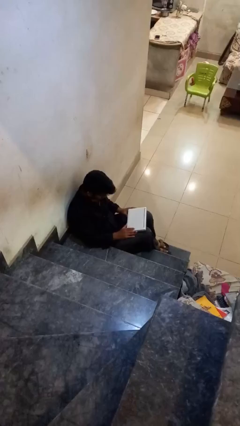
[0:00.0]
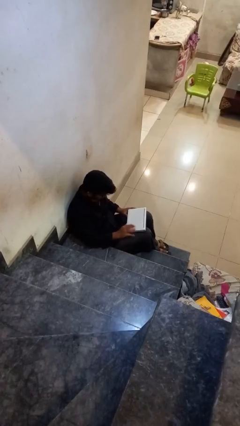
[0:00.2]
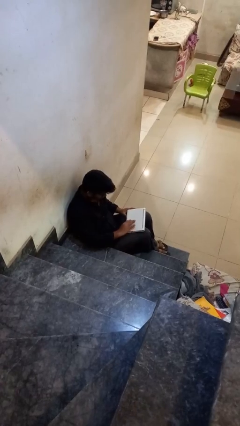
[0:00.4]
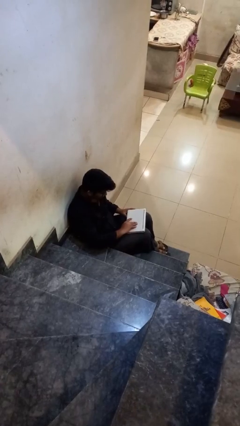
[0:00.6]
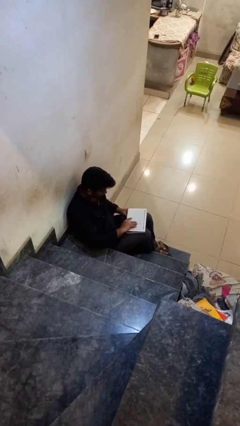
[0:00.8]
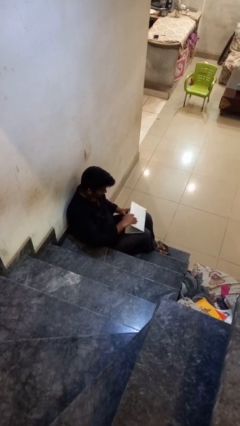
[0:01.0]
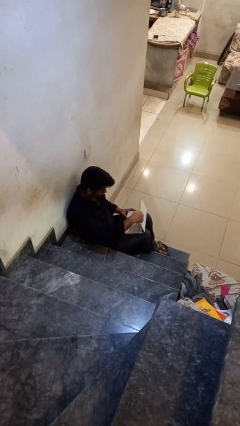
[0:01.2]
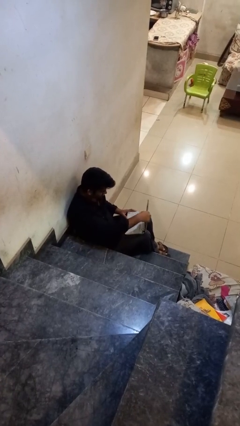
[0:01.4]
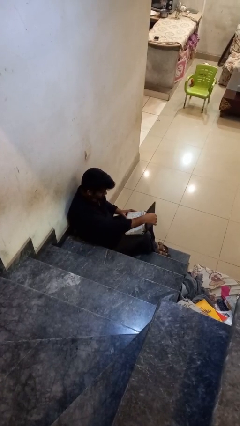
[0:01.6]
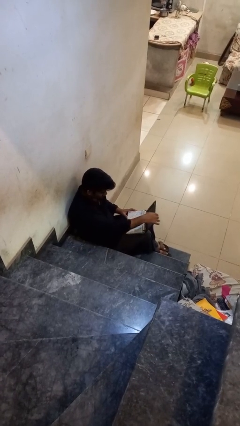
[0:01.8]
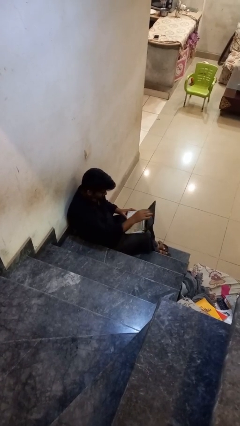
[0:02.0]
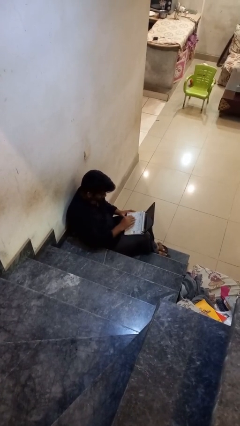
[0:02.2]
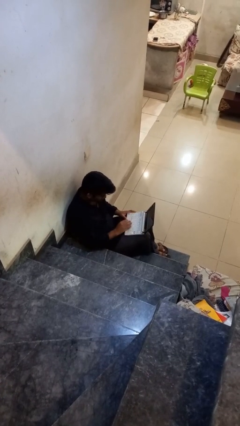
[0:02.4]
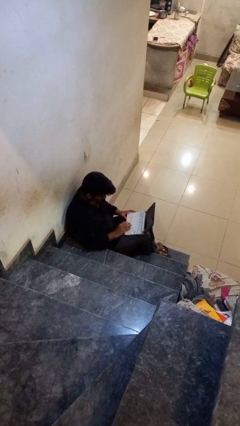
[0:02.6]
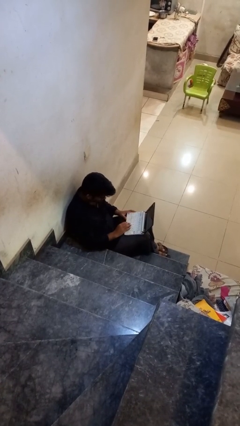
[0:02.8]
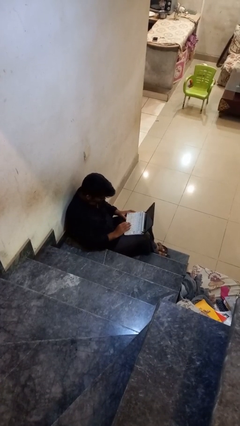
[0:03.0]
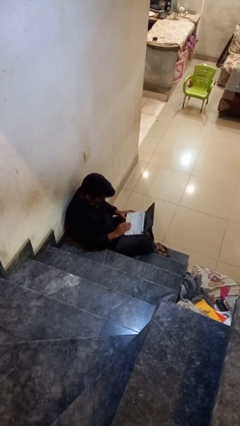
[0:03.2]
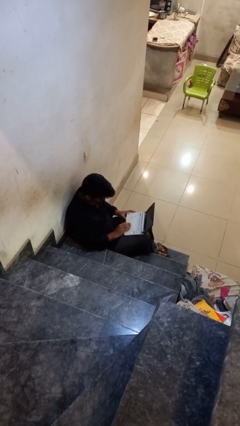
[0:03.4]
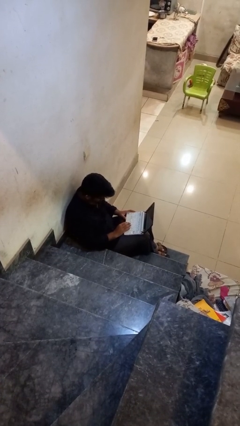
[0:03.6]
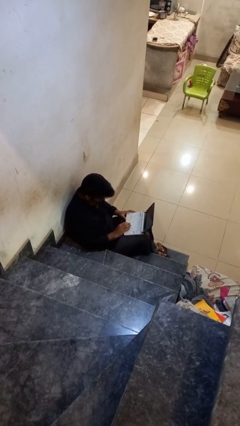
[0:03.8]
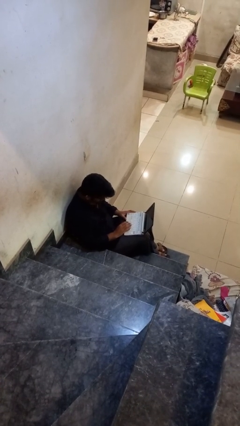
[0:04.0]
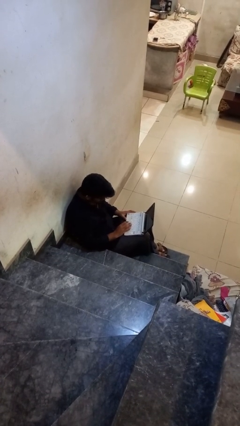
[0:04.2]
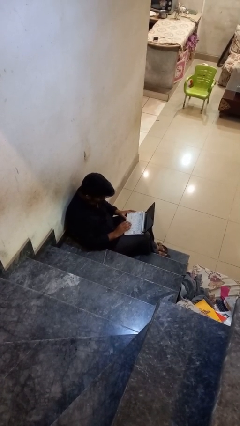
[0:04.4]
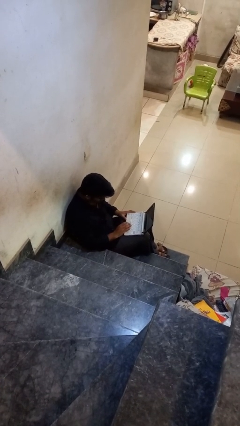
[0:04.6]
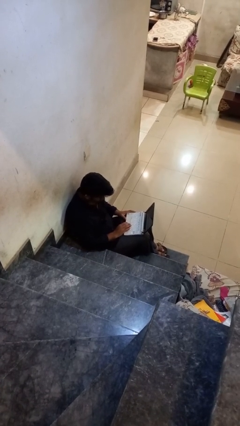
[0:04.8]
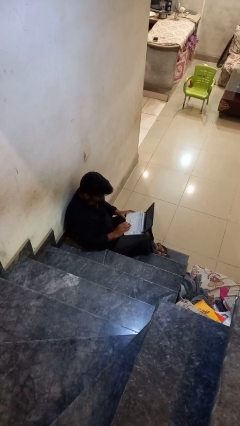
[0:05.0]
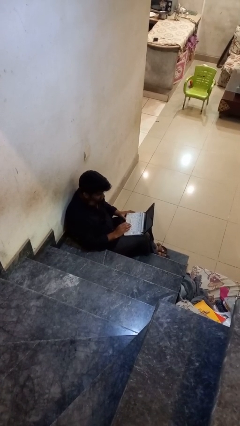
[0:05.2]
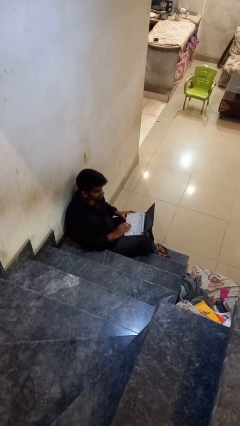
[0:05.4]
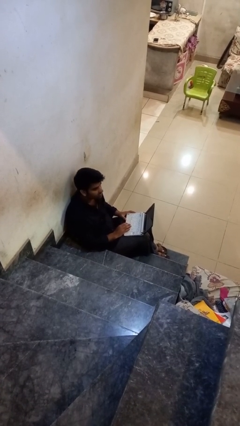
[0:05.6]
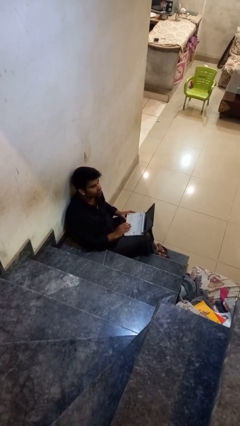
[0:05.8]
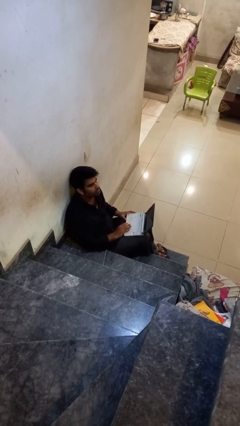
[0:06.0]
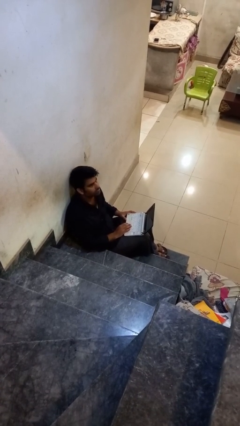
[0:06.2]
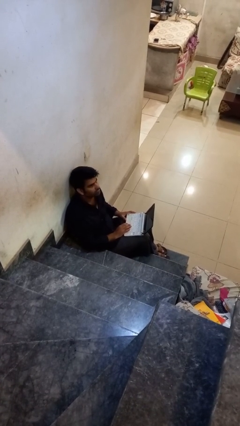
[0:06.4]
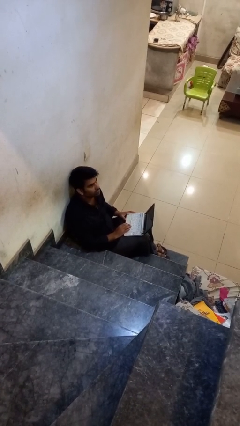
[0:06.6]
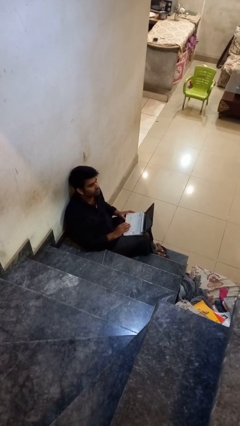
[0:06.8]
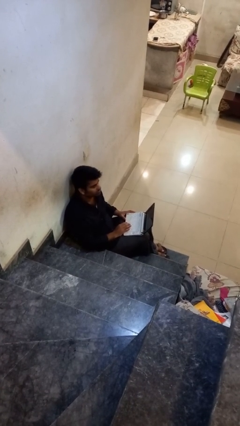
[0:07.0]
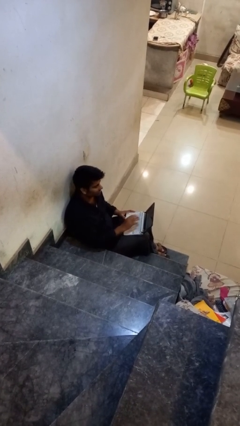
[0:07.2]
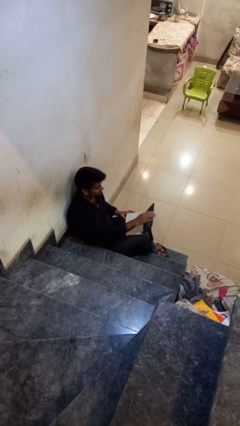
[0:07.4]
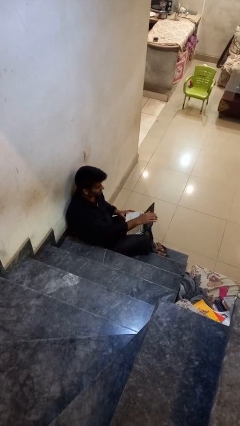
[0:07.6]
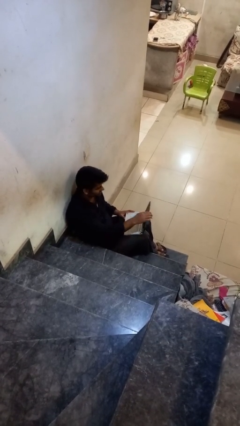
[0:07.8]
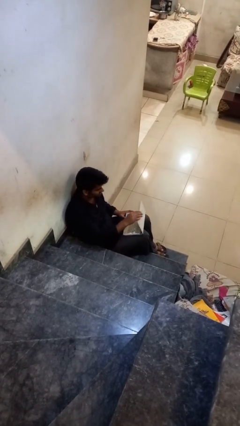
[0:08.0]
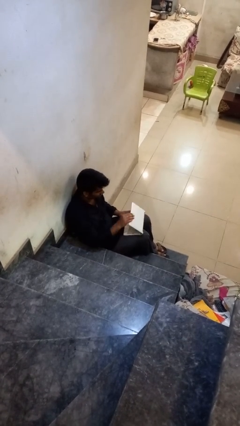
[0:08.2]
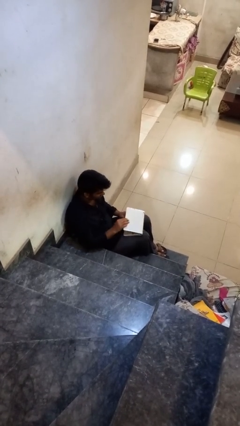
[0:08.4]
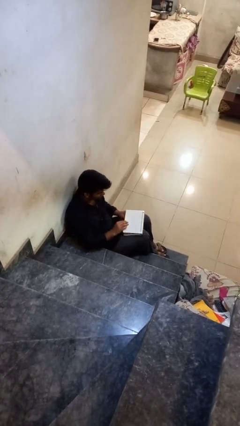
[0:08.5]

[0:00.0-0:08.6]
person interacts with laptop

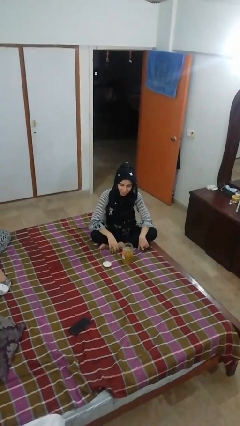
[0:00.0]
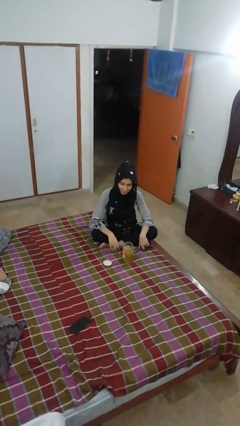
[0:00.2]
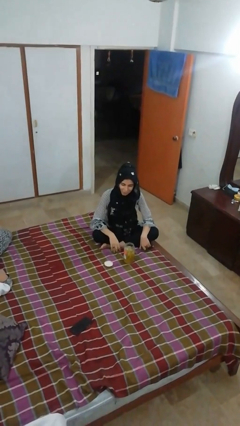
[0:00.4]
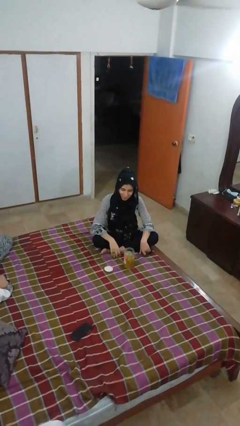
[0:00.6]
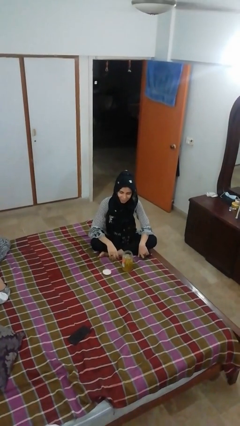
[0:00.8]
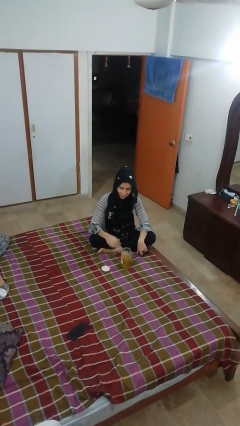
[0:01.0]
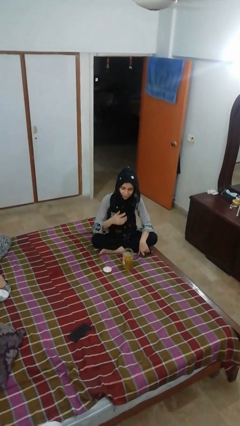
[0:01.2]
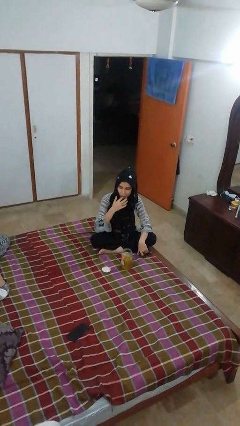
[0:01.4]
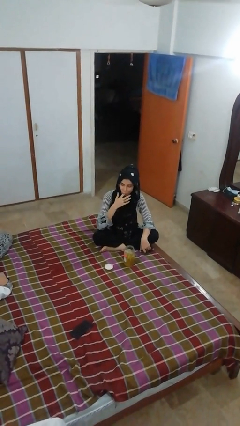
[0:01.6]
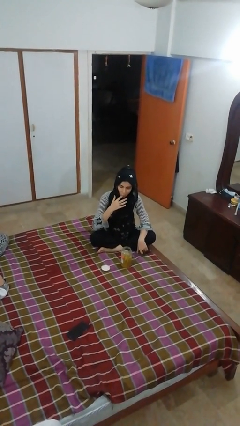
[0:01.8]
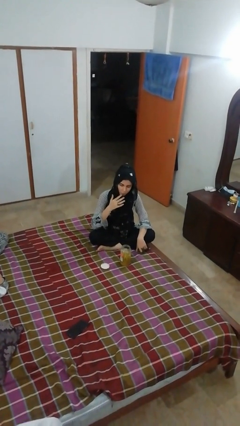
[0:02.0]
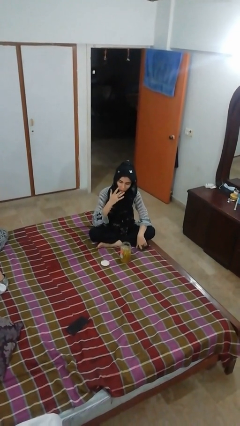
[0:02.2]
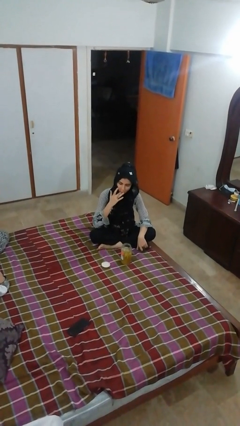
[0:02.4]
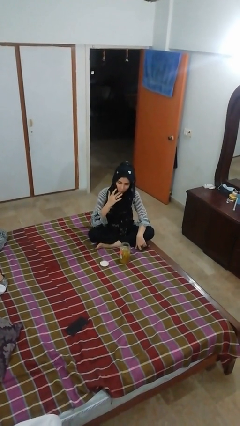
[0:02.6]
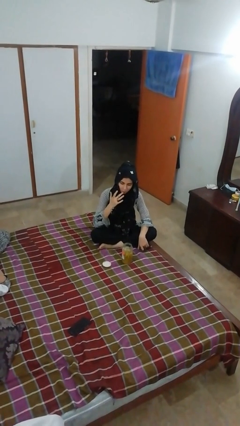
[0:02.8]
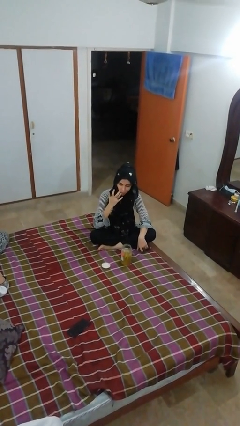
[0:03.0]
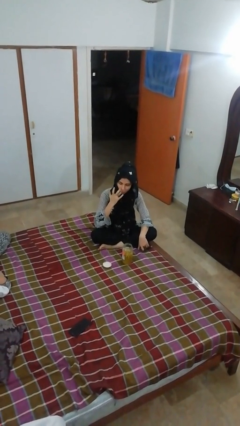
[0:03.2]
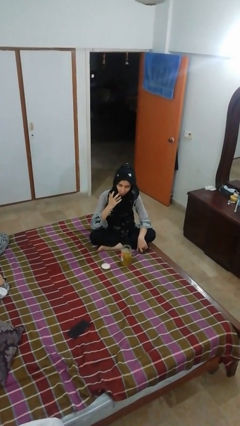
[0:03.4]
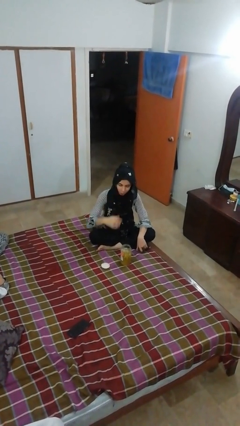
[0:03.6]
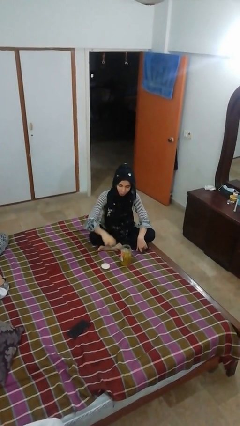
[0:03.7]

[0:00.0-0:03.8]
person licks fingers

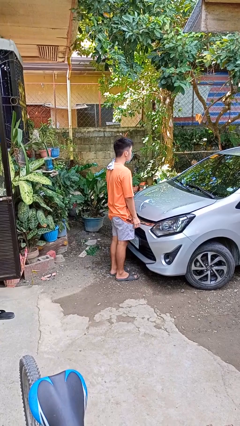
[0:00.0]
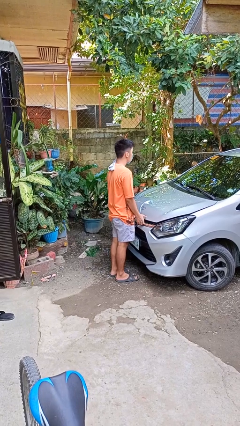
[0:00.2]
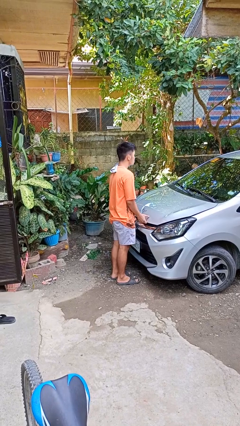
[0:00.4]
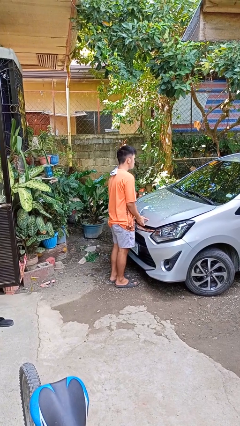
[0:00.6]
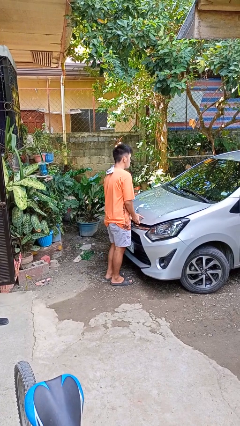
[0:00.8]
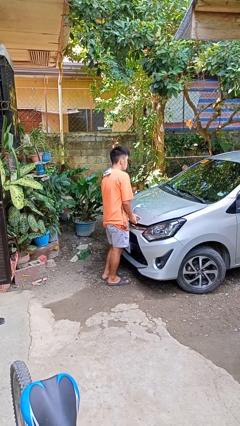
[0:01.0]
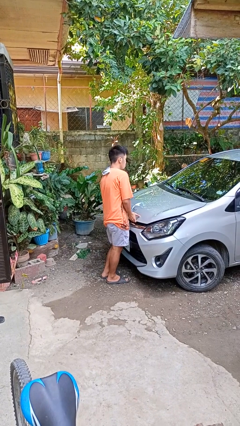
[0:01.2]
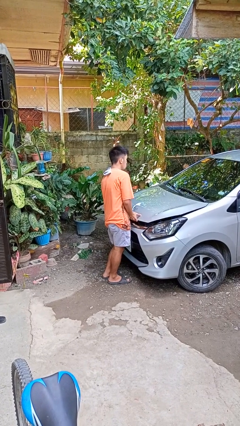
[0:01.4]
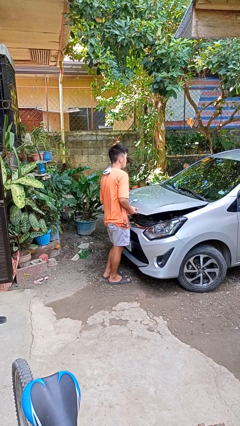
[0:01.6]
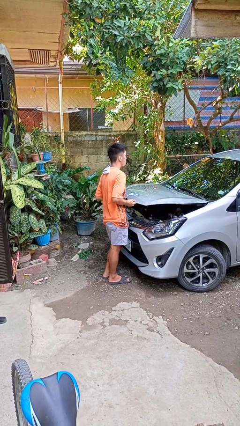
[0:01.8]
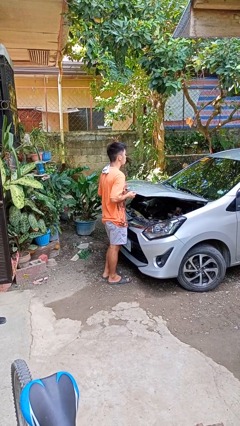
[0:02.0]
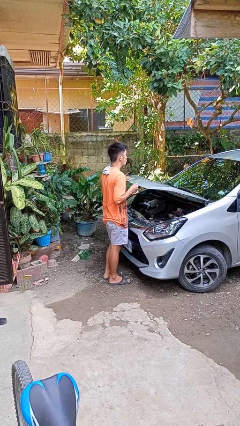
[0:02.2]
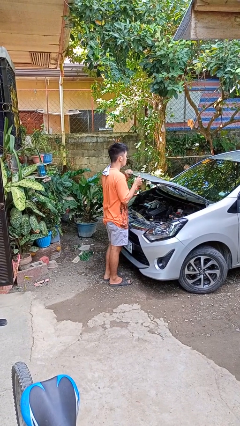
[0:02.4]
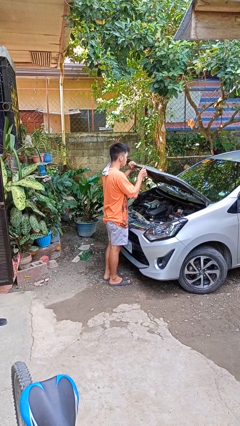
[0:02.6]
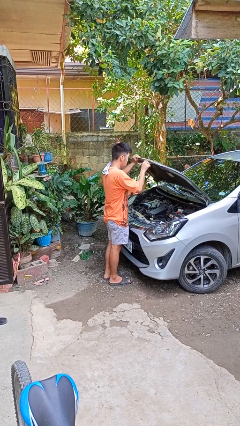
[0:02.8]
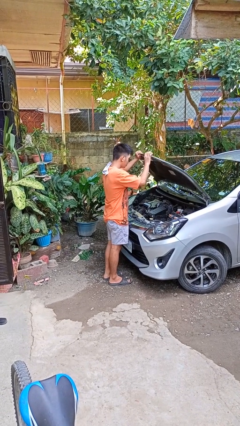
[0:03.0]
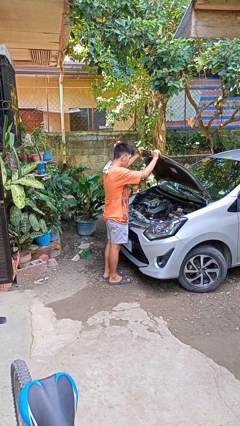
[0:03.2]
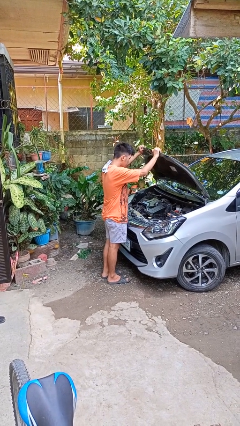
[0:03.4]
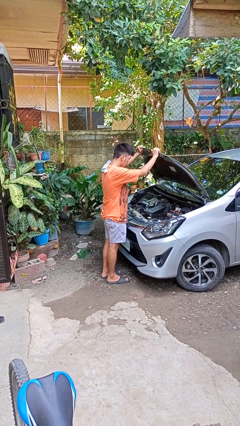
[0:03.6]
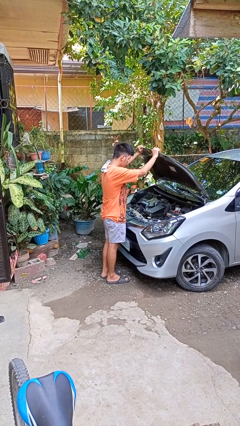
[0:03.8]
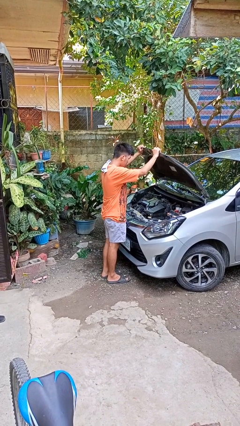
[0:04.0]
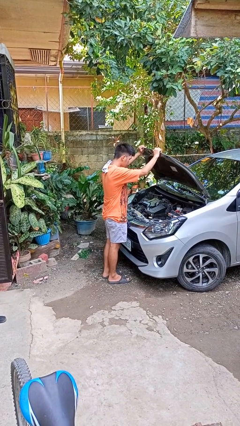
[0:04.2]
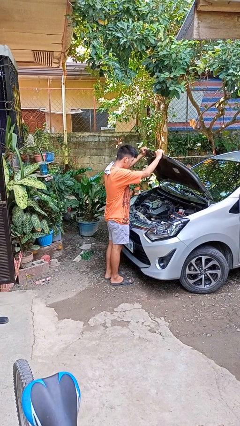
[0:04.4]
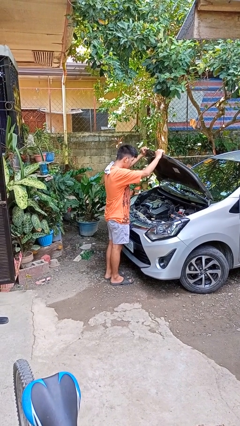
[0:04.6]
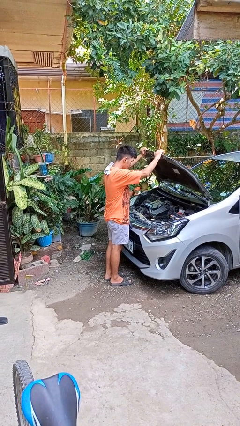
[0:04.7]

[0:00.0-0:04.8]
person opens car hood

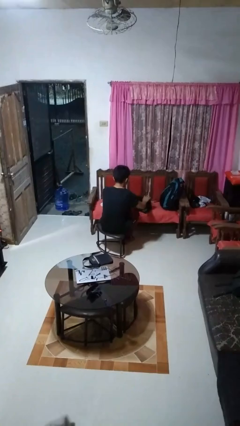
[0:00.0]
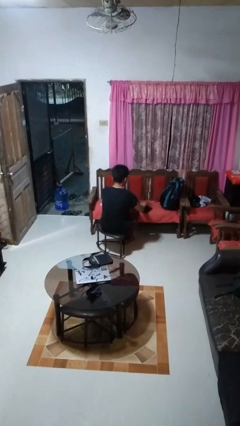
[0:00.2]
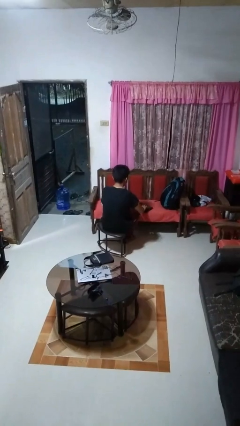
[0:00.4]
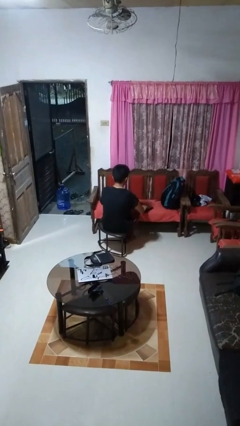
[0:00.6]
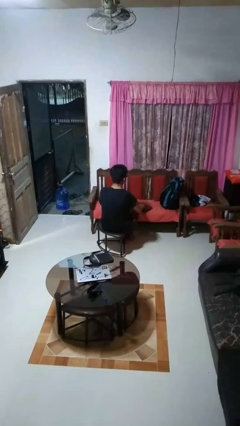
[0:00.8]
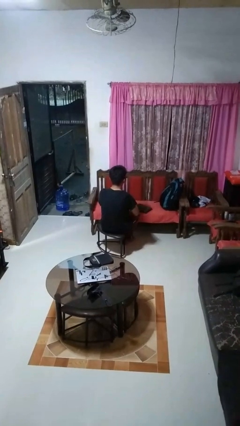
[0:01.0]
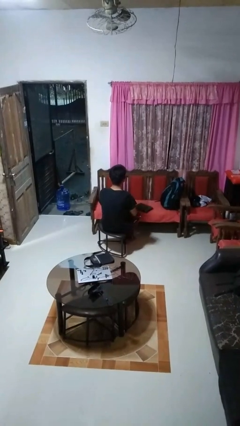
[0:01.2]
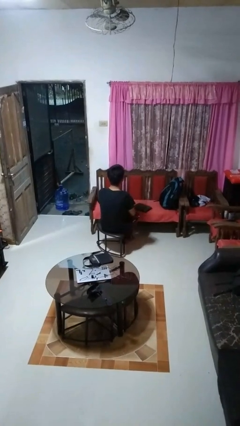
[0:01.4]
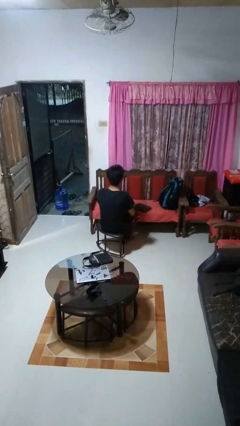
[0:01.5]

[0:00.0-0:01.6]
person closes laptop
